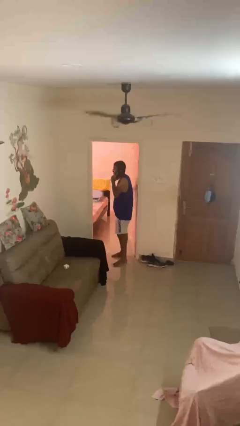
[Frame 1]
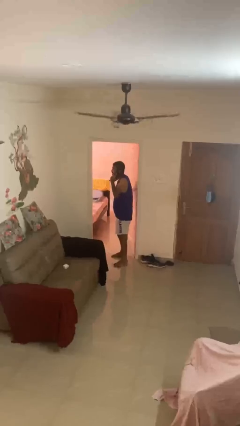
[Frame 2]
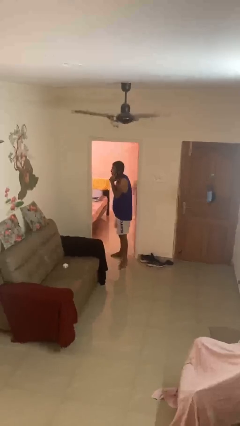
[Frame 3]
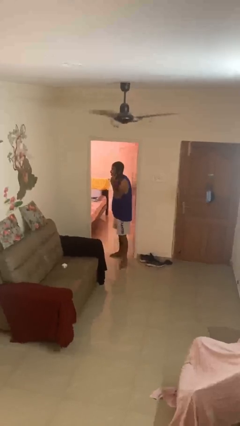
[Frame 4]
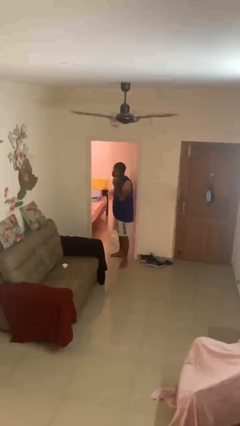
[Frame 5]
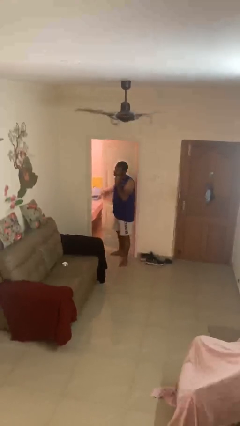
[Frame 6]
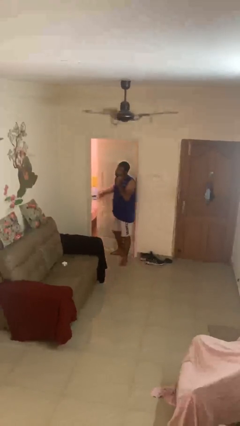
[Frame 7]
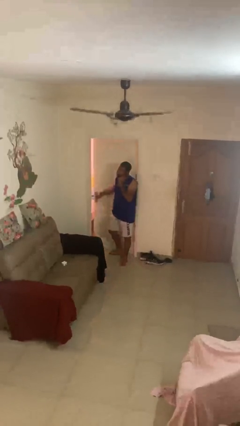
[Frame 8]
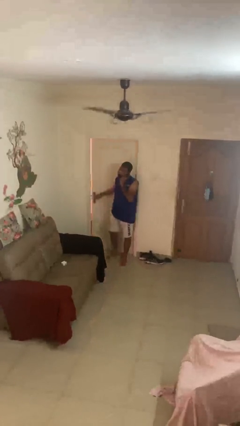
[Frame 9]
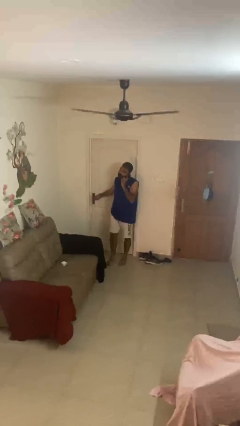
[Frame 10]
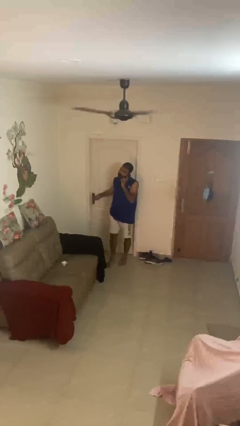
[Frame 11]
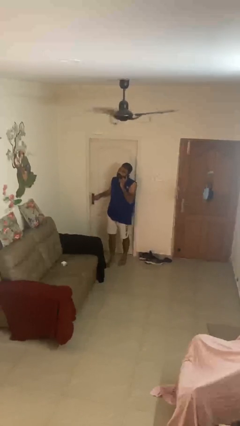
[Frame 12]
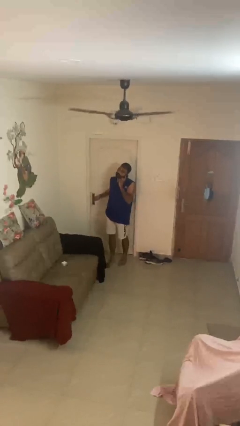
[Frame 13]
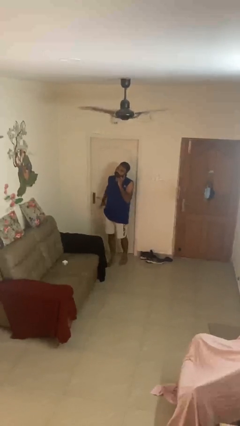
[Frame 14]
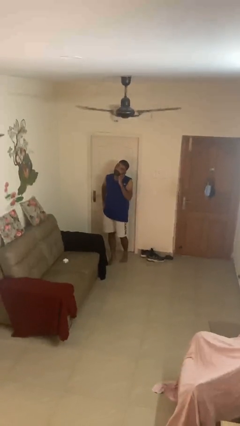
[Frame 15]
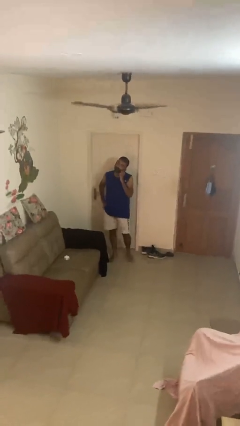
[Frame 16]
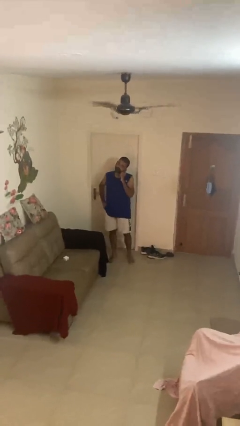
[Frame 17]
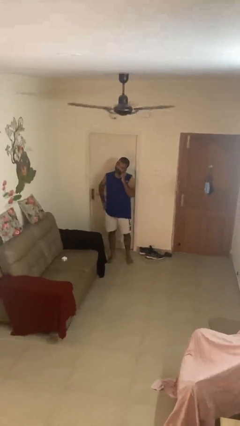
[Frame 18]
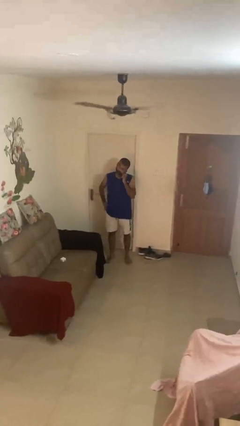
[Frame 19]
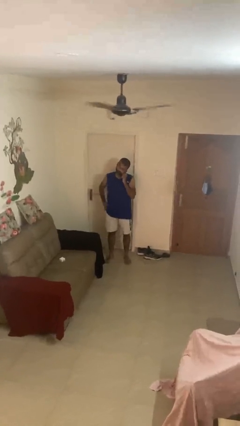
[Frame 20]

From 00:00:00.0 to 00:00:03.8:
person closes facility door

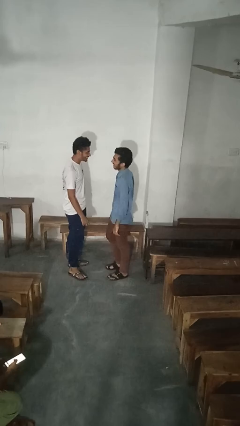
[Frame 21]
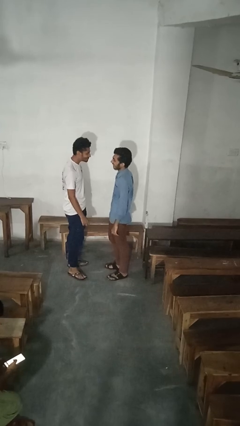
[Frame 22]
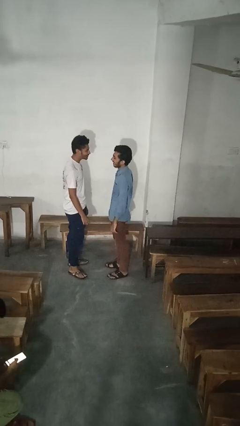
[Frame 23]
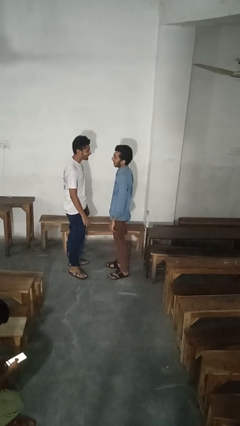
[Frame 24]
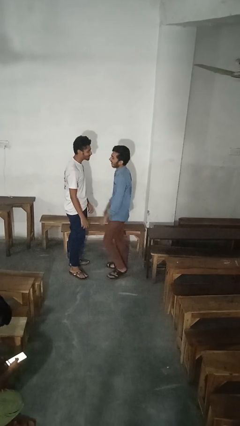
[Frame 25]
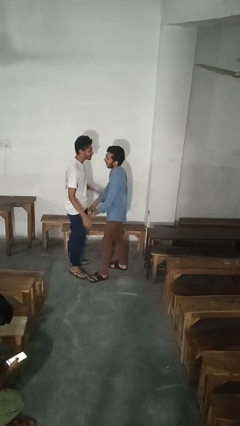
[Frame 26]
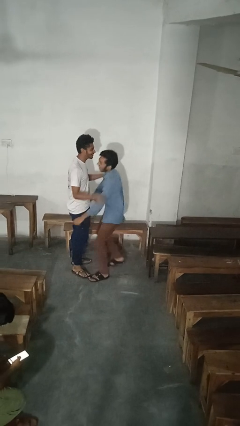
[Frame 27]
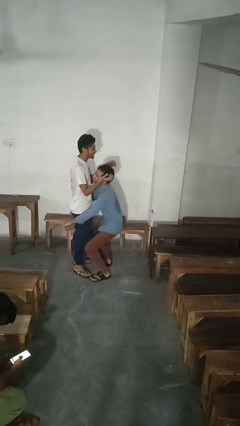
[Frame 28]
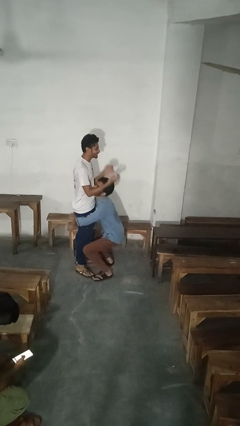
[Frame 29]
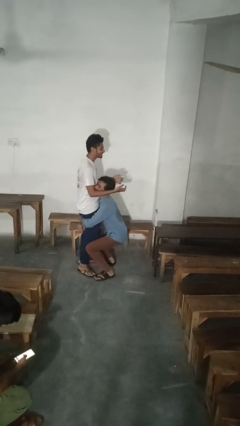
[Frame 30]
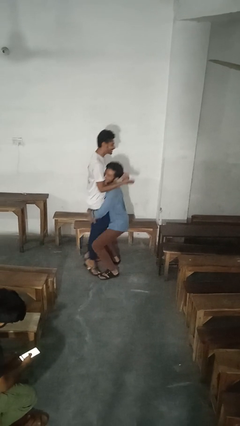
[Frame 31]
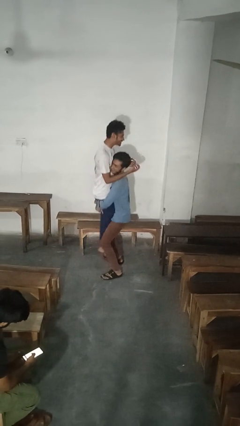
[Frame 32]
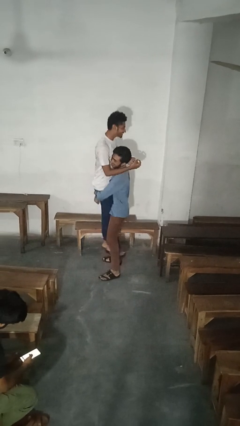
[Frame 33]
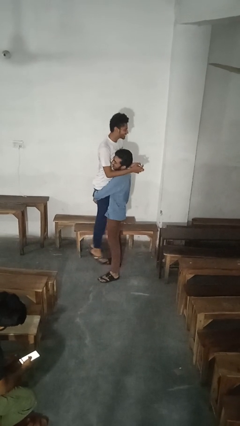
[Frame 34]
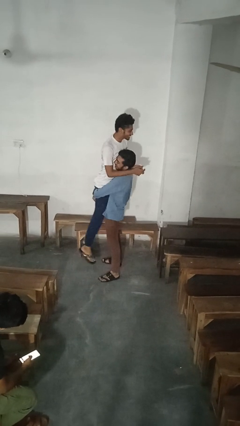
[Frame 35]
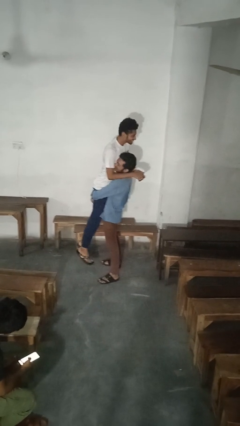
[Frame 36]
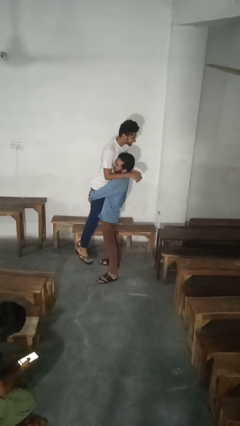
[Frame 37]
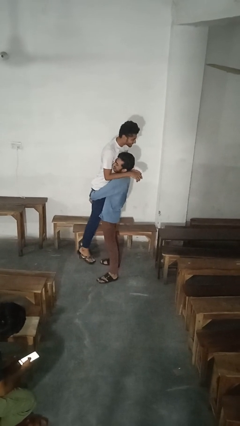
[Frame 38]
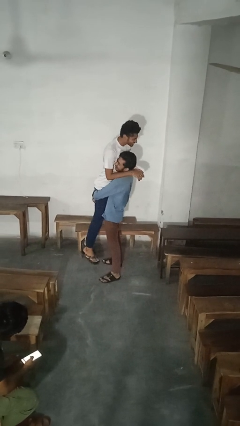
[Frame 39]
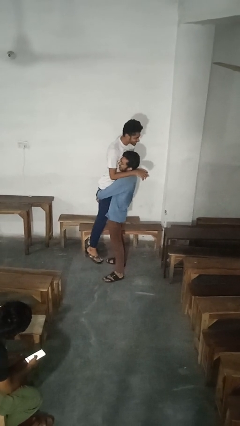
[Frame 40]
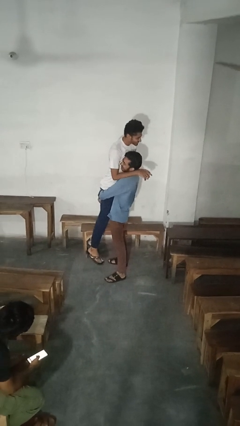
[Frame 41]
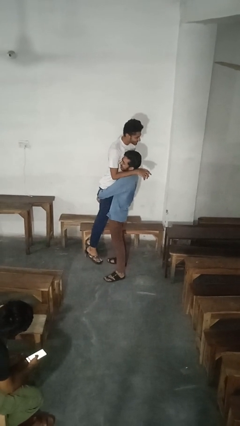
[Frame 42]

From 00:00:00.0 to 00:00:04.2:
person picks up person

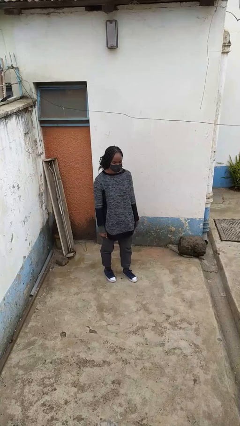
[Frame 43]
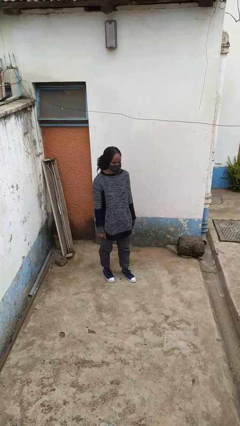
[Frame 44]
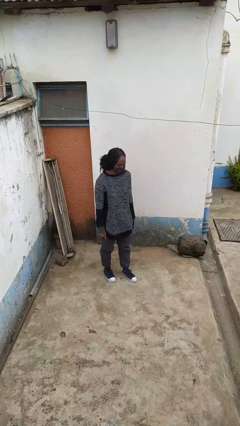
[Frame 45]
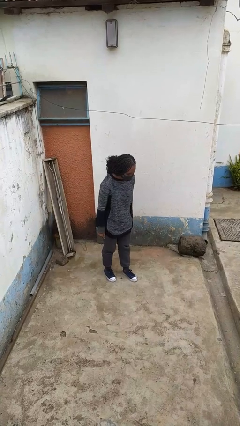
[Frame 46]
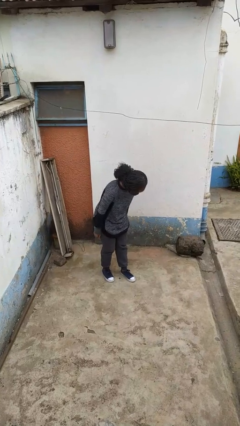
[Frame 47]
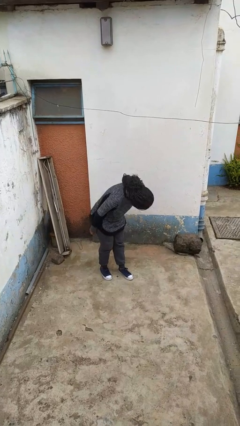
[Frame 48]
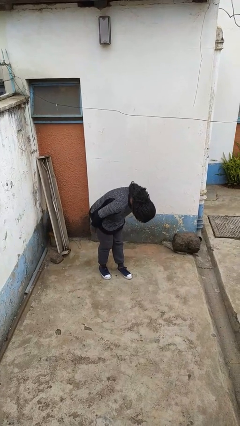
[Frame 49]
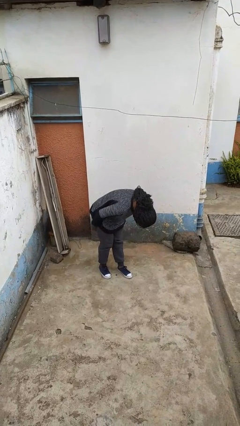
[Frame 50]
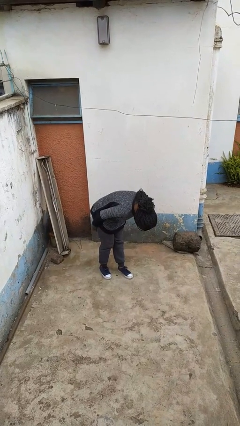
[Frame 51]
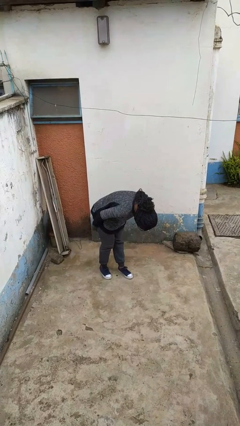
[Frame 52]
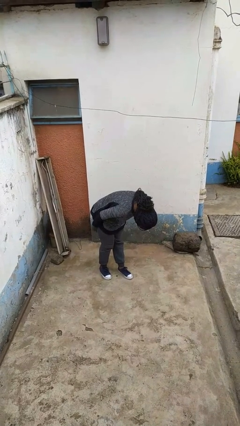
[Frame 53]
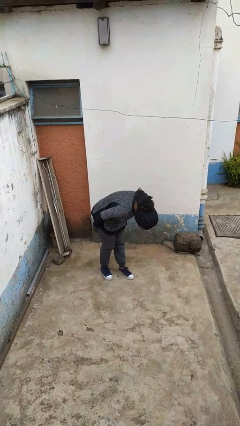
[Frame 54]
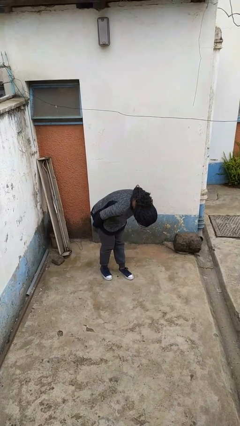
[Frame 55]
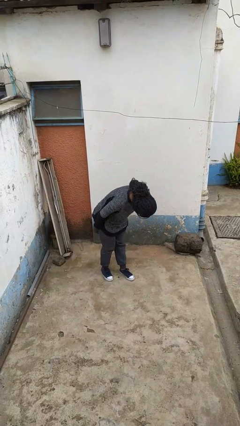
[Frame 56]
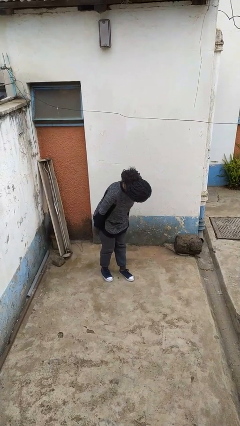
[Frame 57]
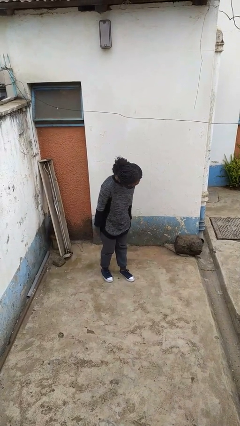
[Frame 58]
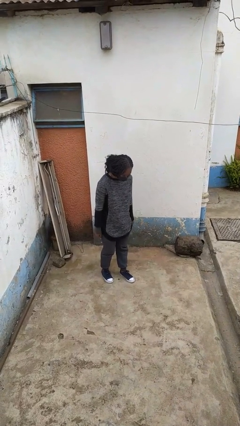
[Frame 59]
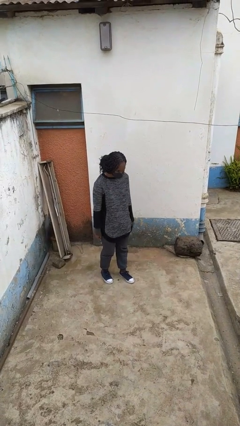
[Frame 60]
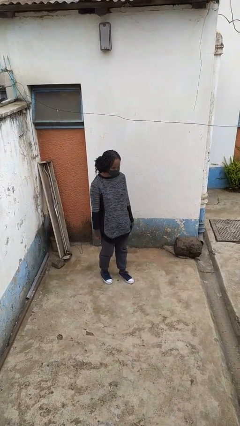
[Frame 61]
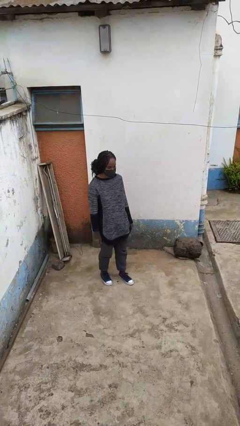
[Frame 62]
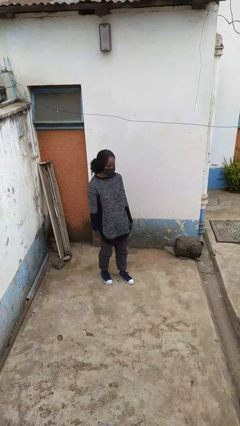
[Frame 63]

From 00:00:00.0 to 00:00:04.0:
person bows

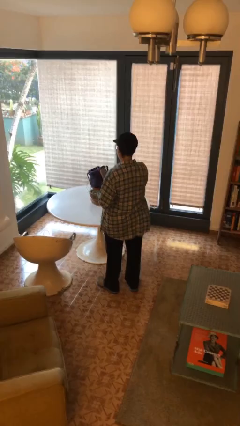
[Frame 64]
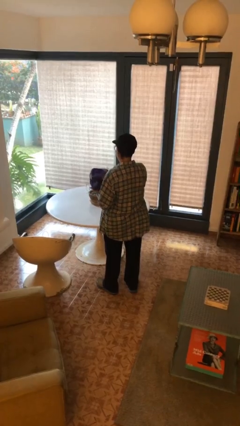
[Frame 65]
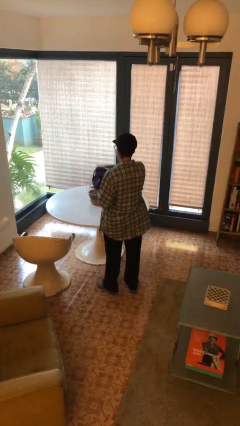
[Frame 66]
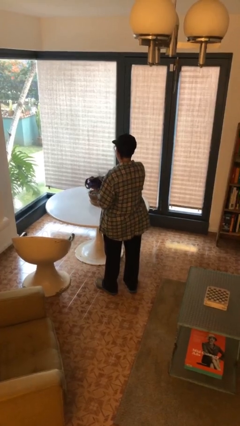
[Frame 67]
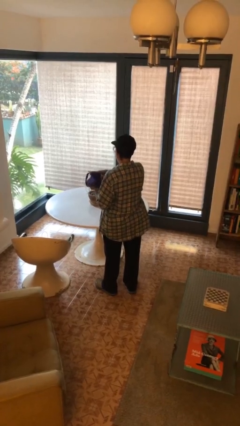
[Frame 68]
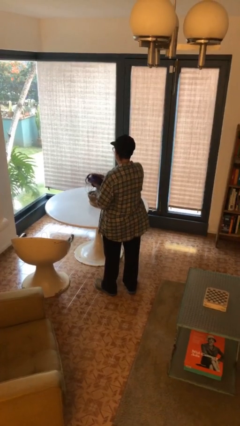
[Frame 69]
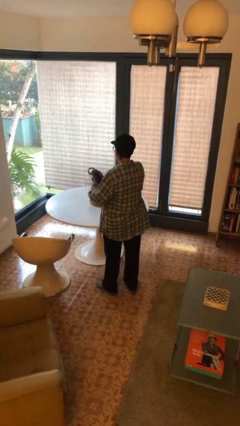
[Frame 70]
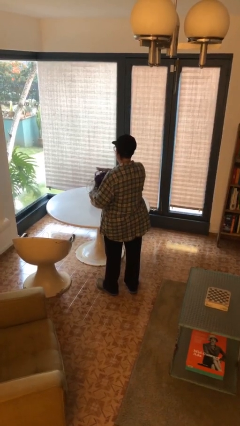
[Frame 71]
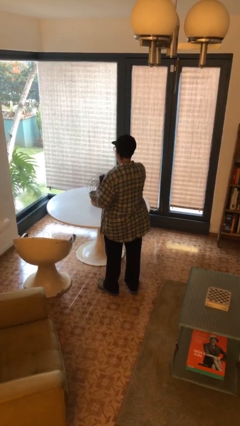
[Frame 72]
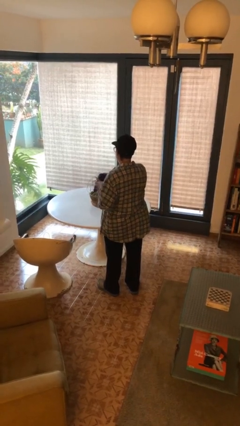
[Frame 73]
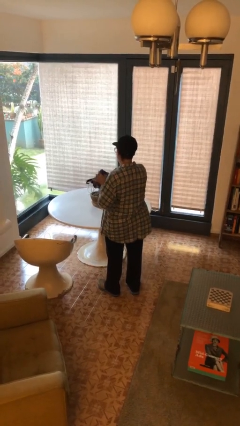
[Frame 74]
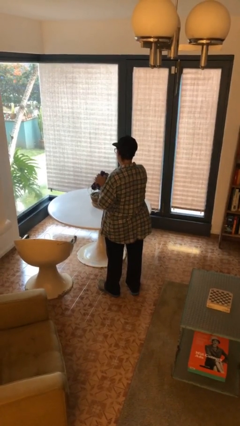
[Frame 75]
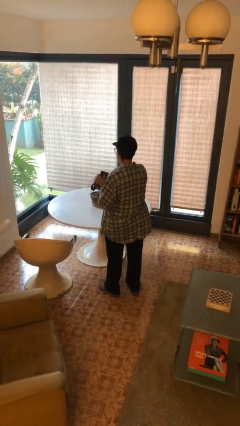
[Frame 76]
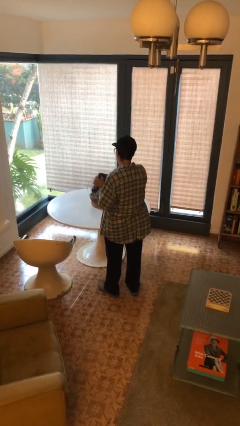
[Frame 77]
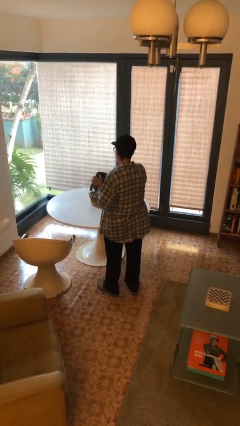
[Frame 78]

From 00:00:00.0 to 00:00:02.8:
person squeezes object

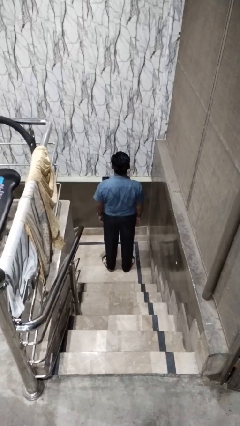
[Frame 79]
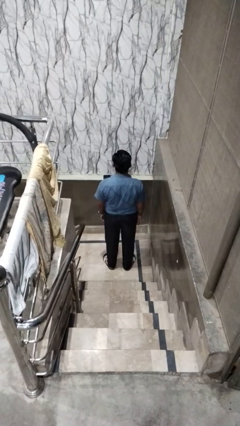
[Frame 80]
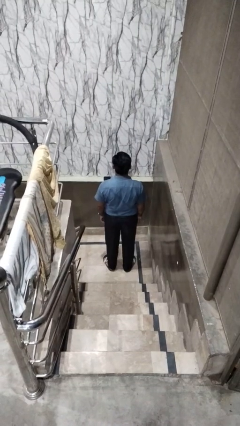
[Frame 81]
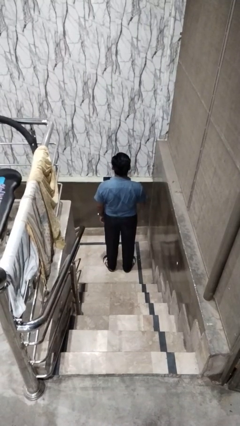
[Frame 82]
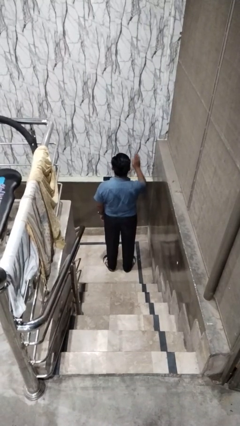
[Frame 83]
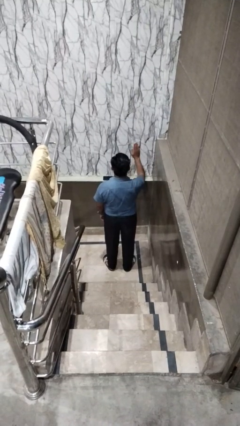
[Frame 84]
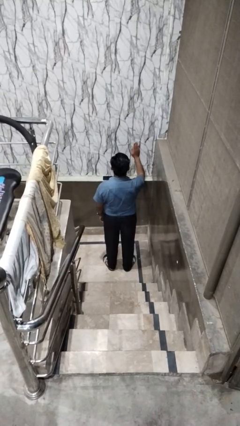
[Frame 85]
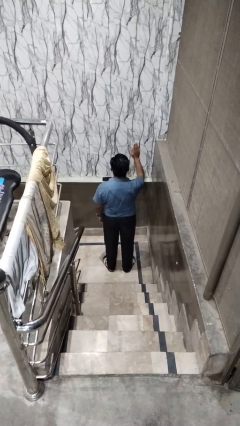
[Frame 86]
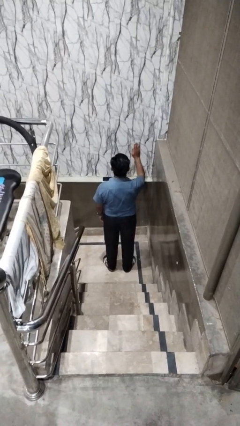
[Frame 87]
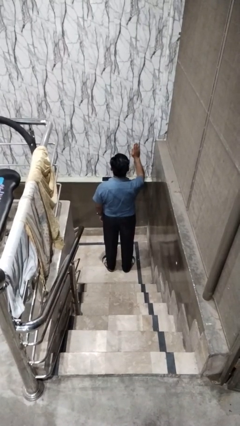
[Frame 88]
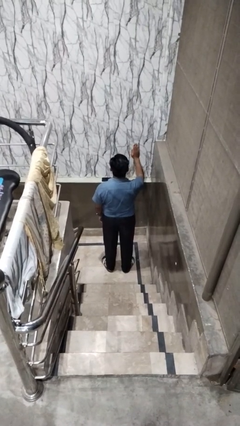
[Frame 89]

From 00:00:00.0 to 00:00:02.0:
person gestures stop

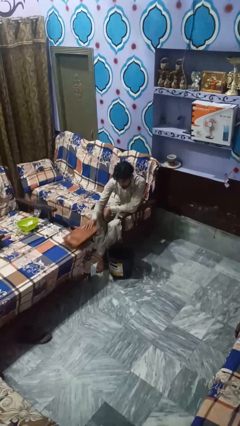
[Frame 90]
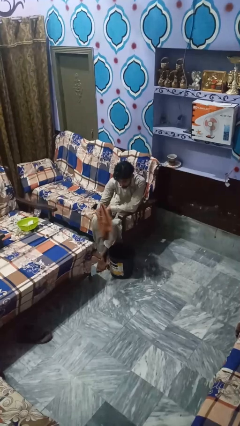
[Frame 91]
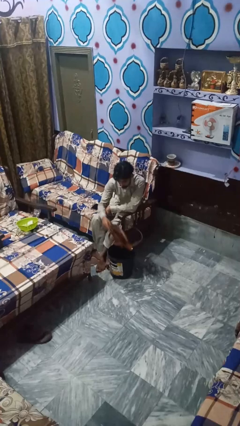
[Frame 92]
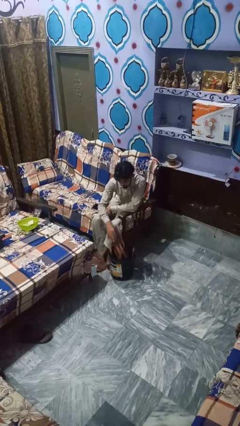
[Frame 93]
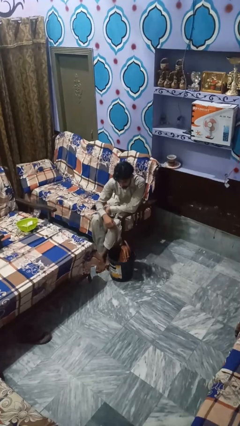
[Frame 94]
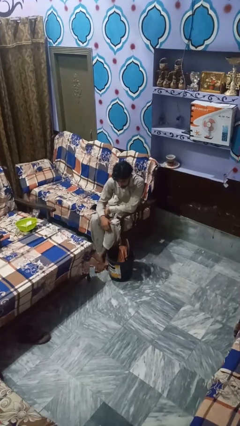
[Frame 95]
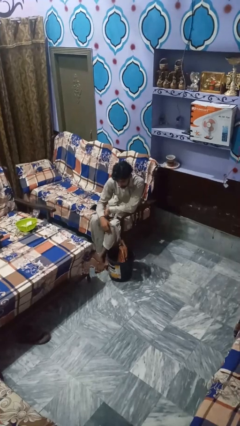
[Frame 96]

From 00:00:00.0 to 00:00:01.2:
person puts object into basket
